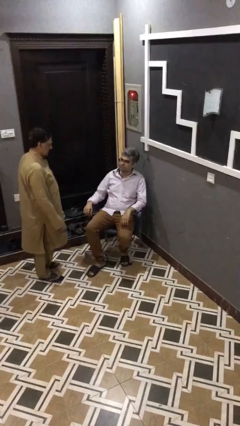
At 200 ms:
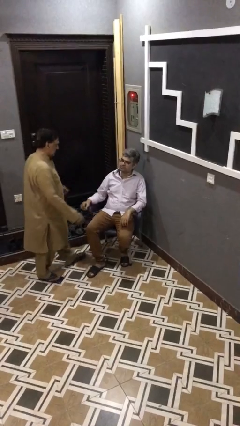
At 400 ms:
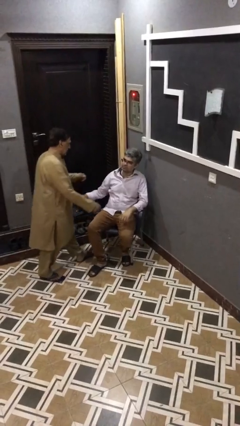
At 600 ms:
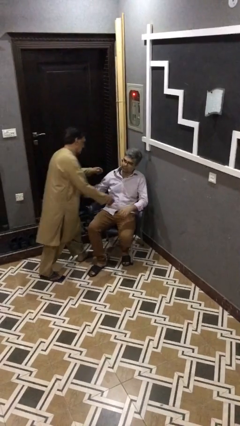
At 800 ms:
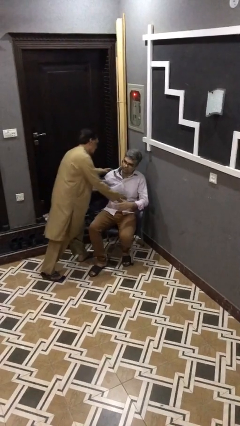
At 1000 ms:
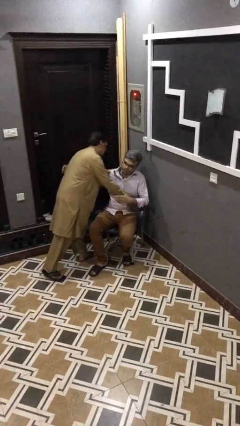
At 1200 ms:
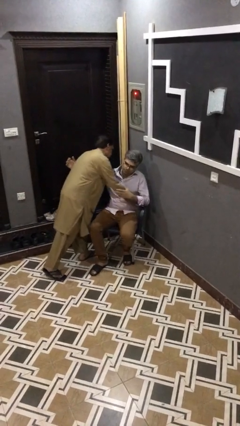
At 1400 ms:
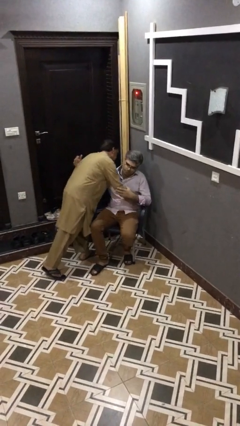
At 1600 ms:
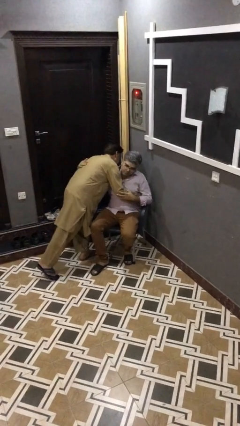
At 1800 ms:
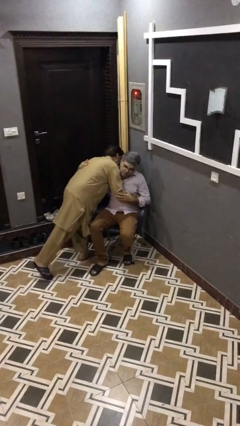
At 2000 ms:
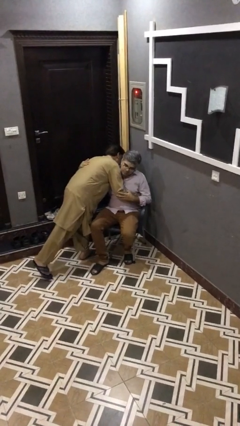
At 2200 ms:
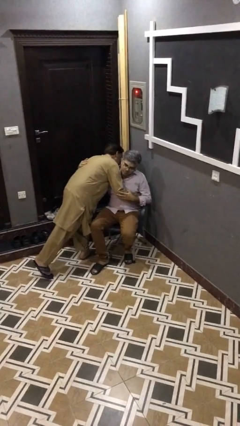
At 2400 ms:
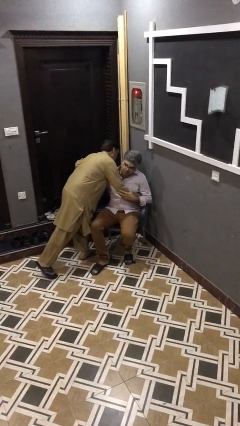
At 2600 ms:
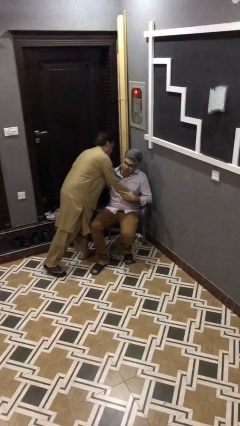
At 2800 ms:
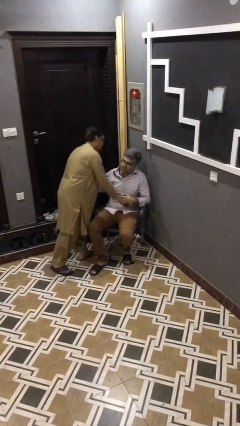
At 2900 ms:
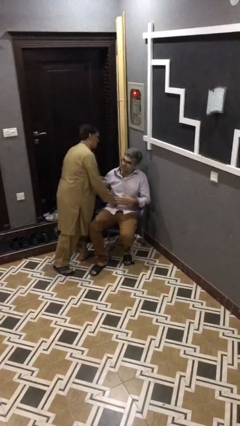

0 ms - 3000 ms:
person embraces person

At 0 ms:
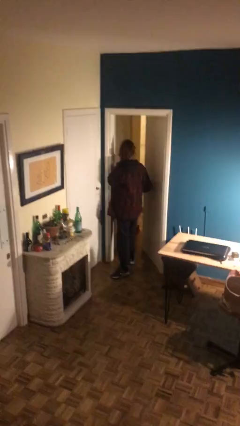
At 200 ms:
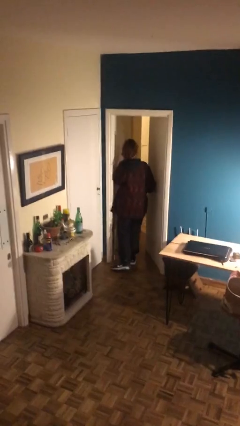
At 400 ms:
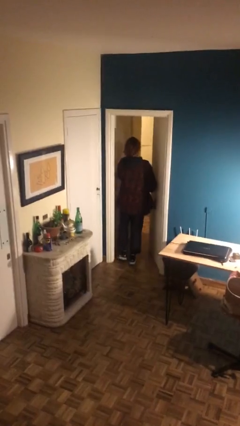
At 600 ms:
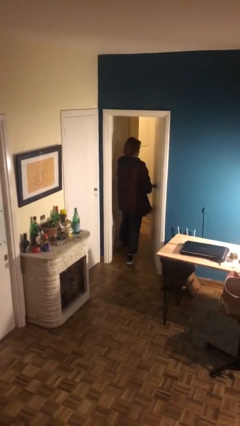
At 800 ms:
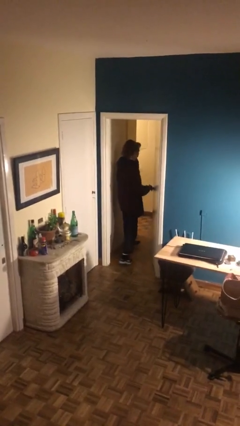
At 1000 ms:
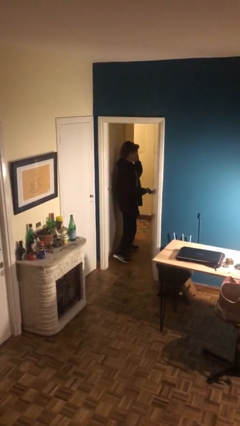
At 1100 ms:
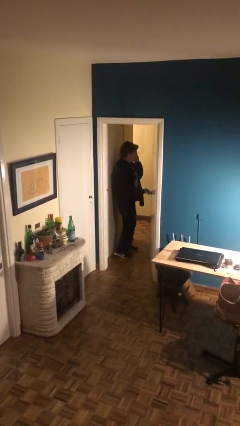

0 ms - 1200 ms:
person exits scene through structure

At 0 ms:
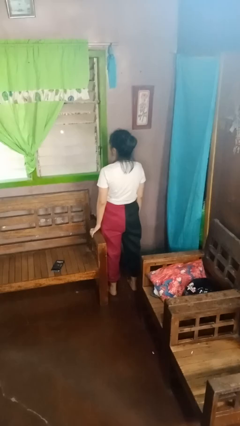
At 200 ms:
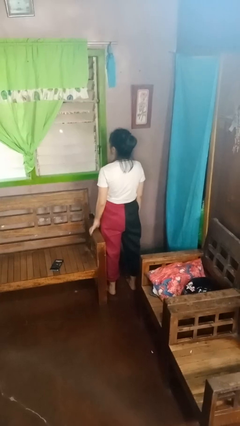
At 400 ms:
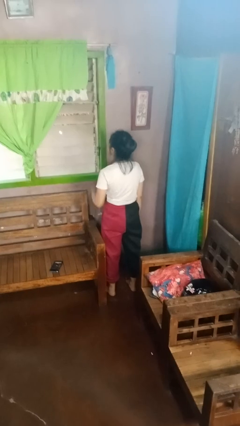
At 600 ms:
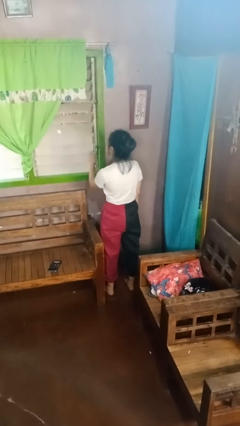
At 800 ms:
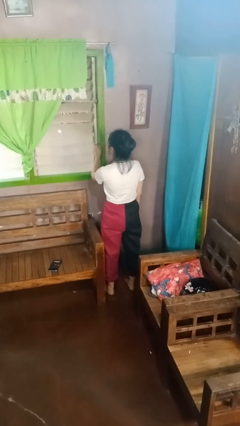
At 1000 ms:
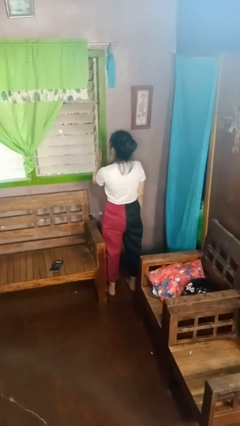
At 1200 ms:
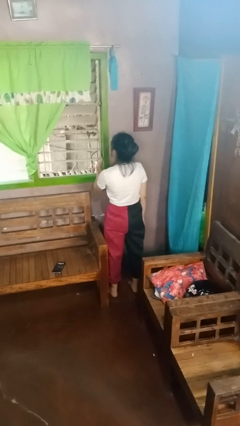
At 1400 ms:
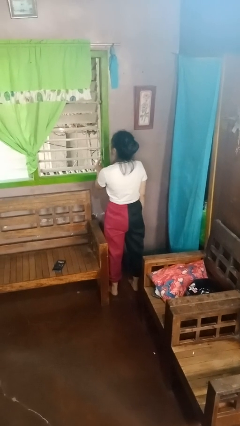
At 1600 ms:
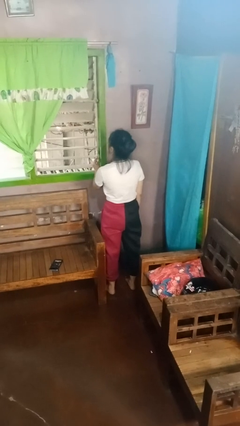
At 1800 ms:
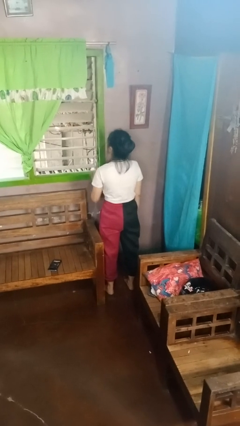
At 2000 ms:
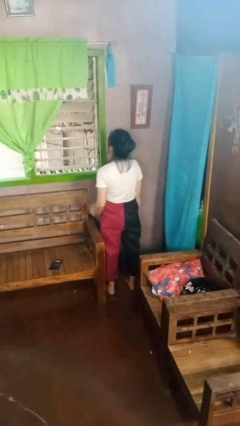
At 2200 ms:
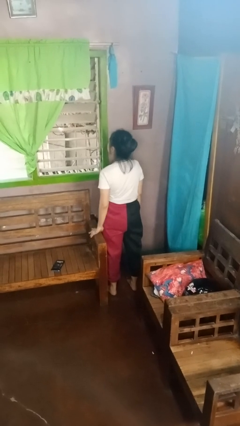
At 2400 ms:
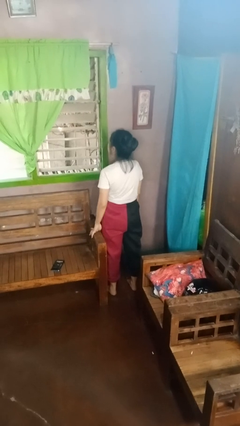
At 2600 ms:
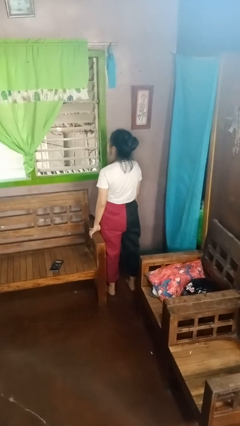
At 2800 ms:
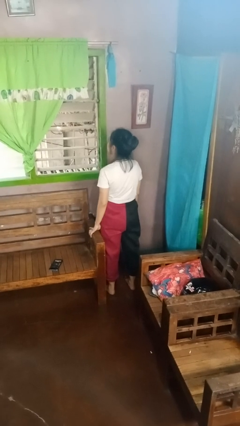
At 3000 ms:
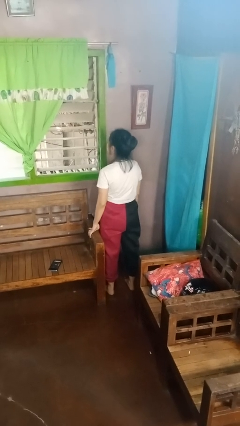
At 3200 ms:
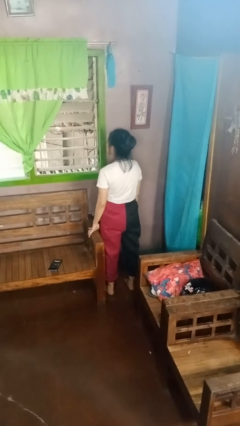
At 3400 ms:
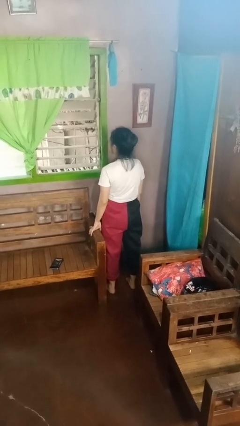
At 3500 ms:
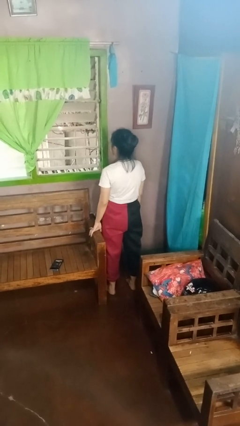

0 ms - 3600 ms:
person opens home window

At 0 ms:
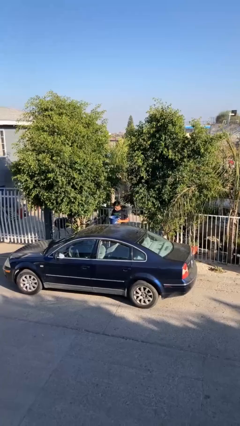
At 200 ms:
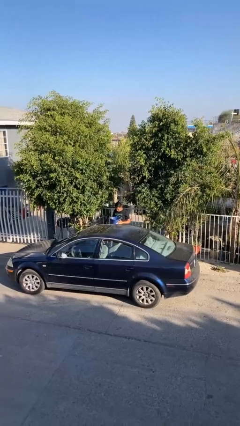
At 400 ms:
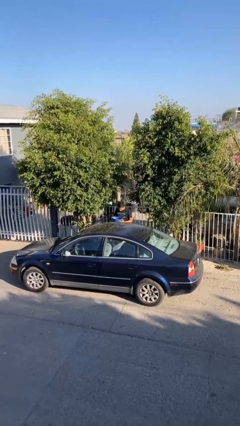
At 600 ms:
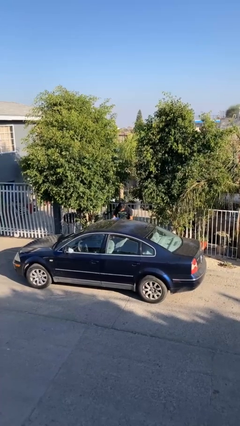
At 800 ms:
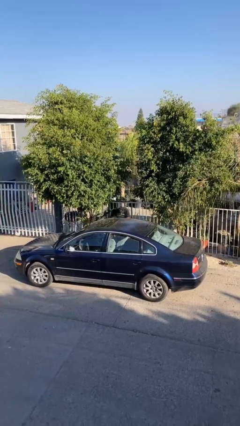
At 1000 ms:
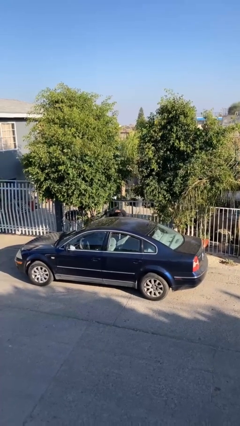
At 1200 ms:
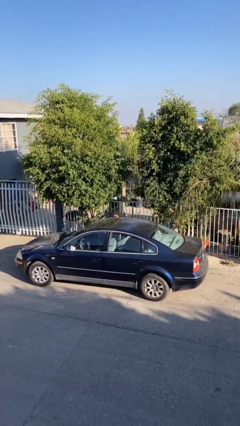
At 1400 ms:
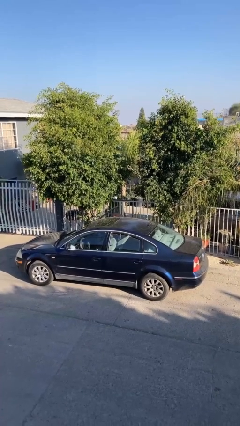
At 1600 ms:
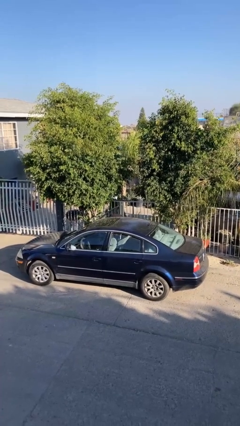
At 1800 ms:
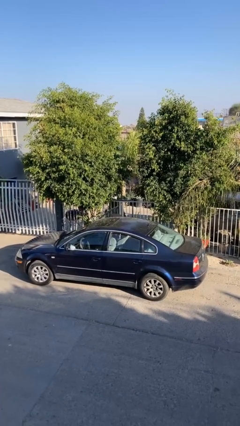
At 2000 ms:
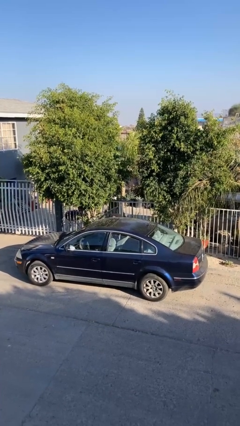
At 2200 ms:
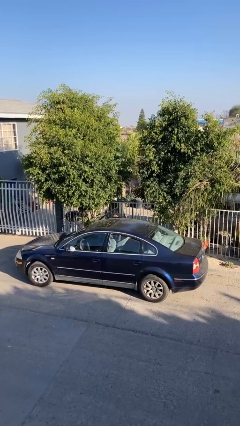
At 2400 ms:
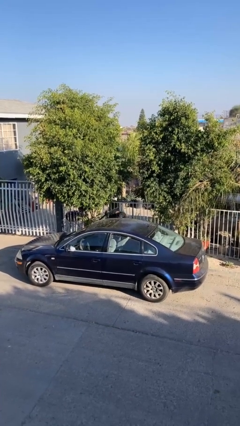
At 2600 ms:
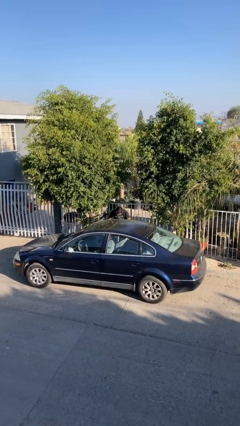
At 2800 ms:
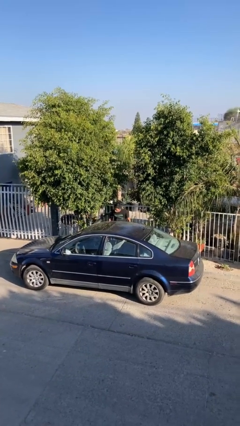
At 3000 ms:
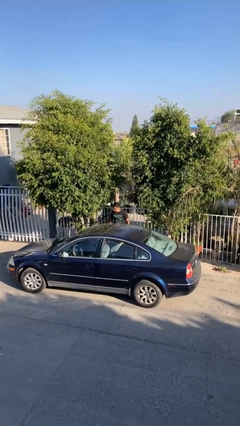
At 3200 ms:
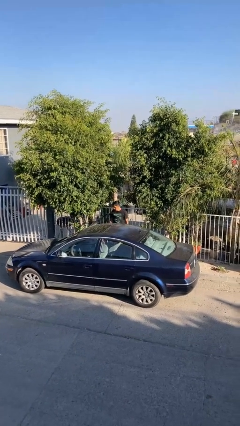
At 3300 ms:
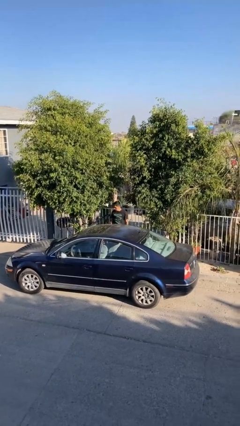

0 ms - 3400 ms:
person loads car

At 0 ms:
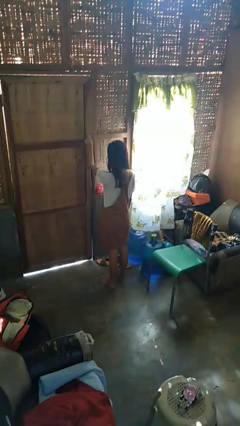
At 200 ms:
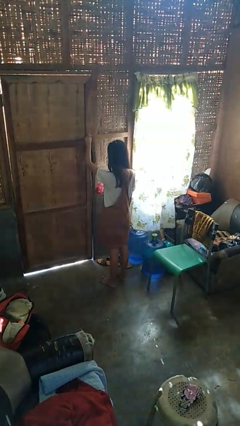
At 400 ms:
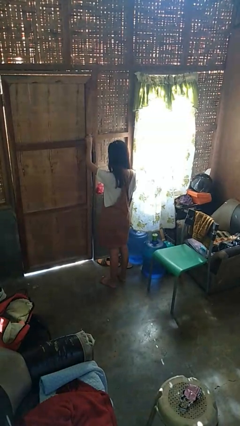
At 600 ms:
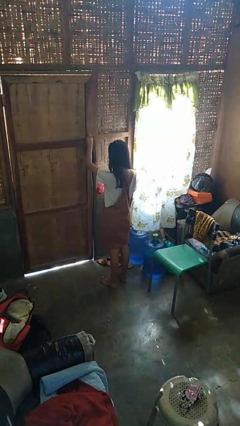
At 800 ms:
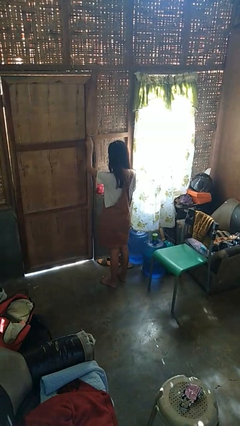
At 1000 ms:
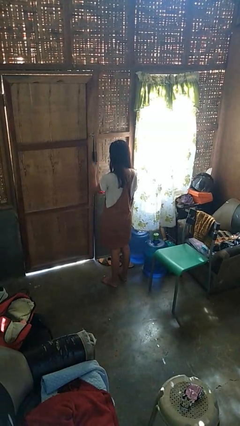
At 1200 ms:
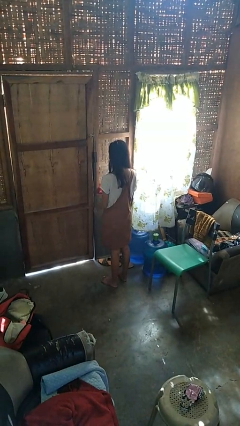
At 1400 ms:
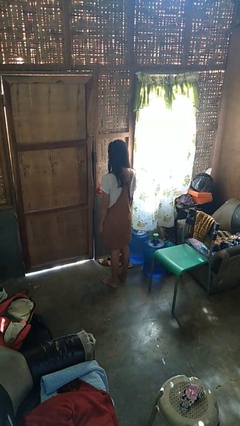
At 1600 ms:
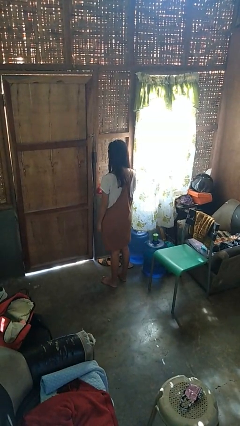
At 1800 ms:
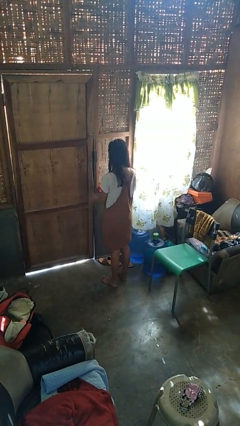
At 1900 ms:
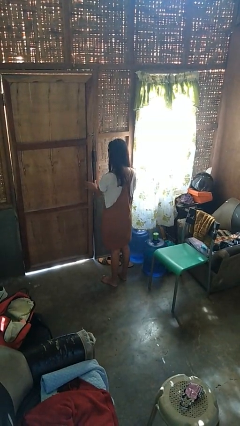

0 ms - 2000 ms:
person unlocks door with keys

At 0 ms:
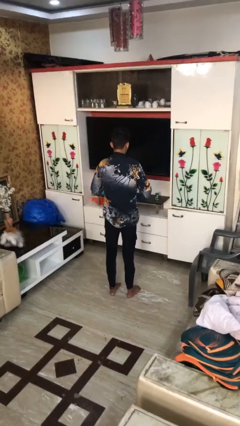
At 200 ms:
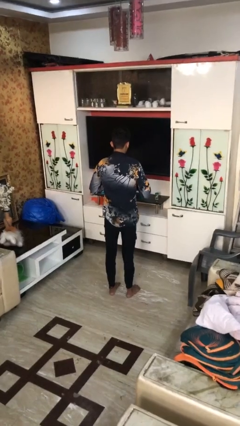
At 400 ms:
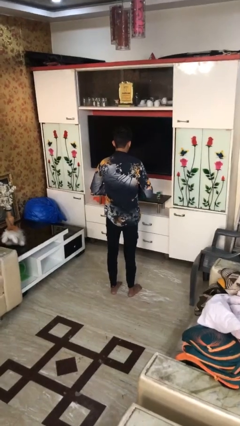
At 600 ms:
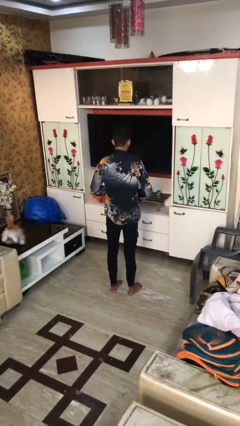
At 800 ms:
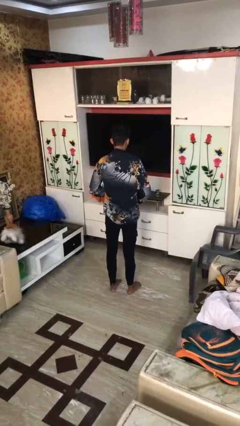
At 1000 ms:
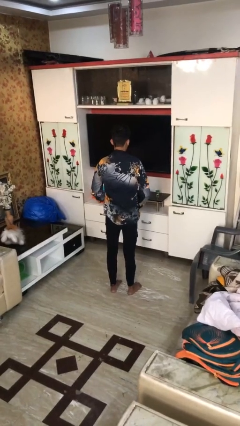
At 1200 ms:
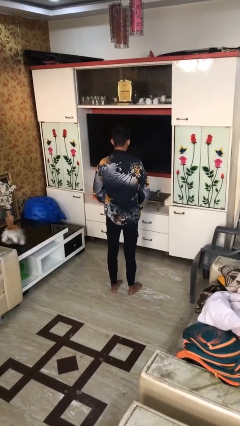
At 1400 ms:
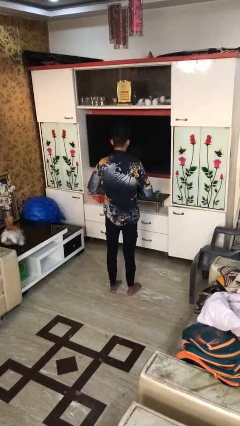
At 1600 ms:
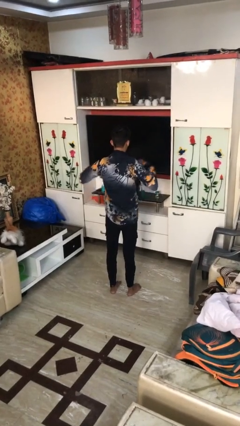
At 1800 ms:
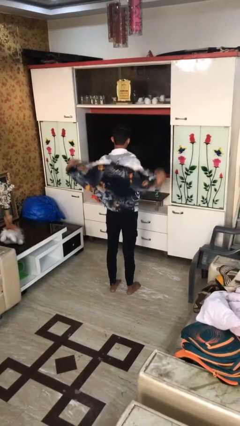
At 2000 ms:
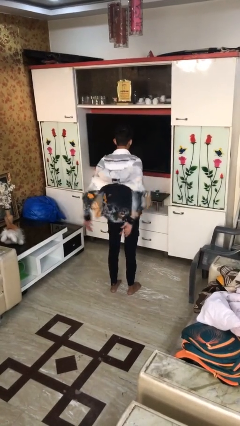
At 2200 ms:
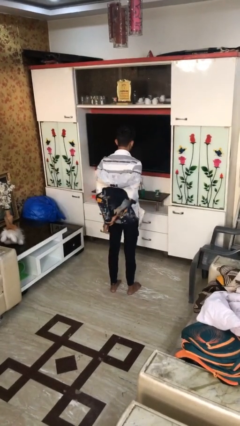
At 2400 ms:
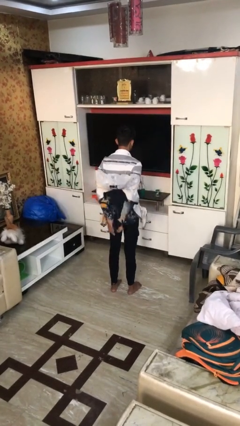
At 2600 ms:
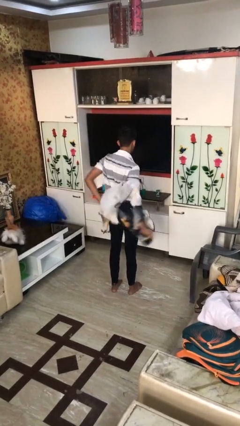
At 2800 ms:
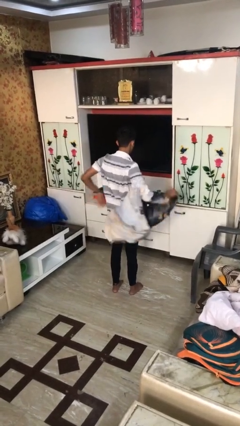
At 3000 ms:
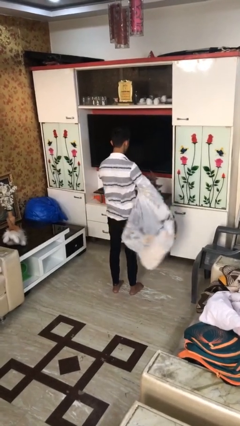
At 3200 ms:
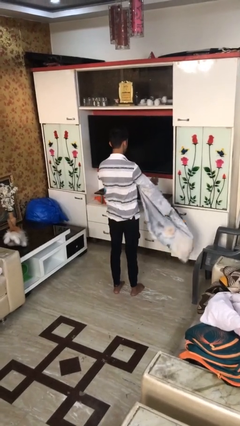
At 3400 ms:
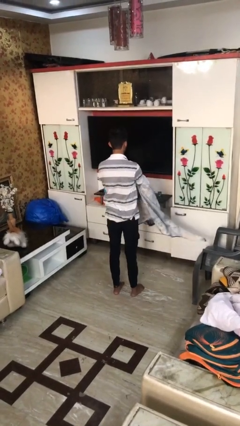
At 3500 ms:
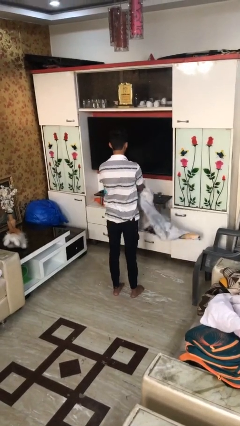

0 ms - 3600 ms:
person takes off shirt

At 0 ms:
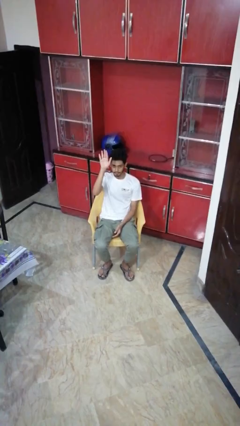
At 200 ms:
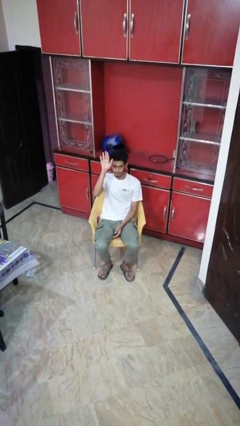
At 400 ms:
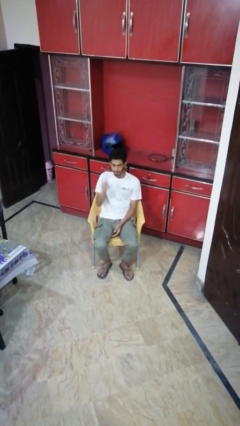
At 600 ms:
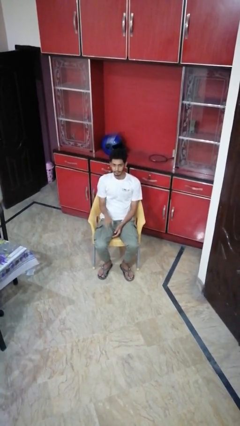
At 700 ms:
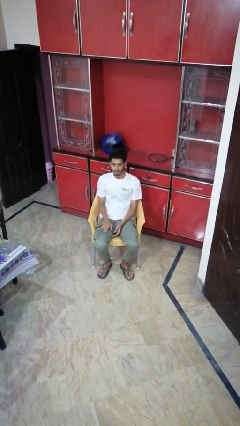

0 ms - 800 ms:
person gestures lower hand
